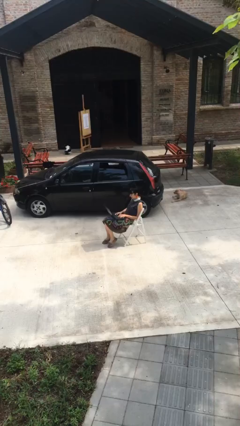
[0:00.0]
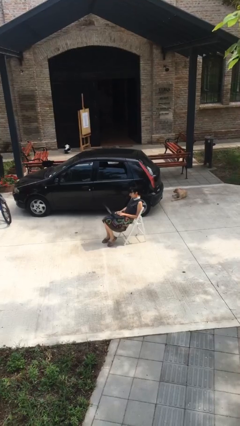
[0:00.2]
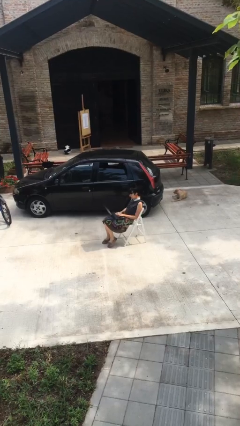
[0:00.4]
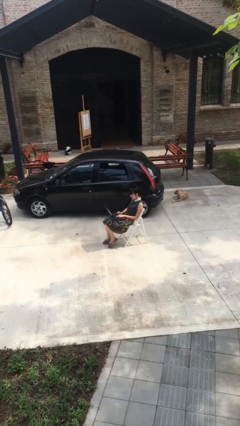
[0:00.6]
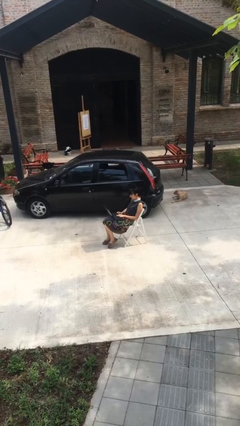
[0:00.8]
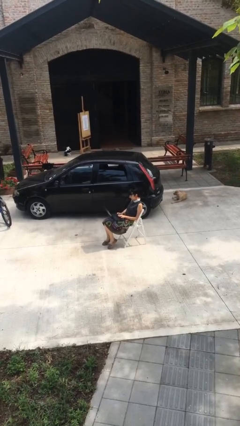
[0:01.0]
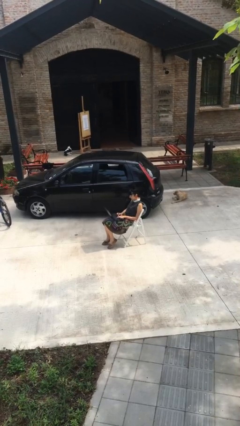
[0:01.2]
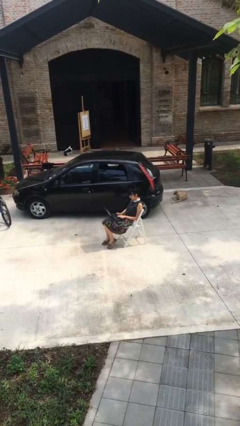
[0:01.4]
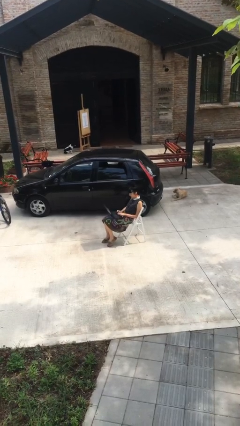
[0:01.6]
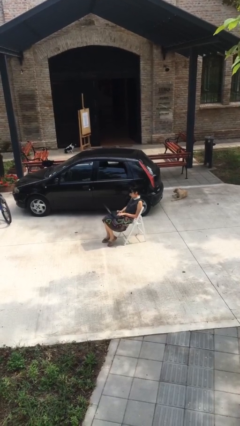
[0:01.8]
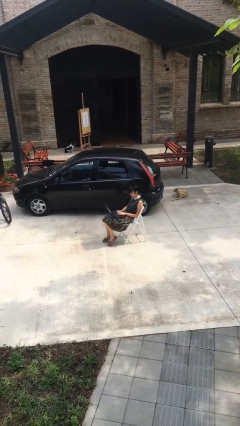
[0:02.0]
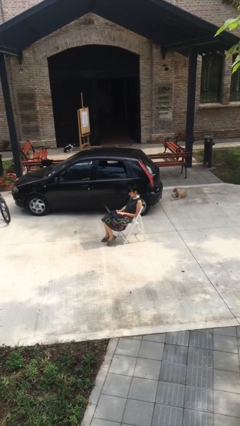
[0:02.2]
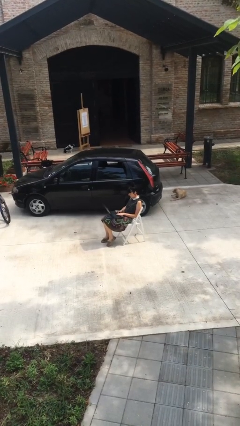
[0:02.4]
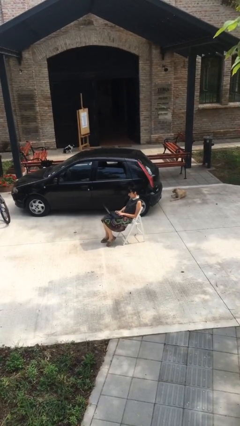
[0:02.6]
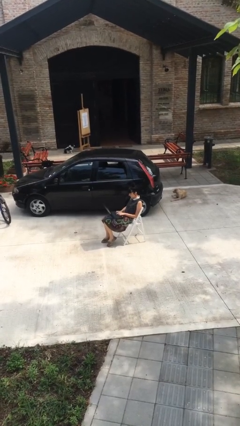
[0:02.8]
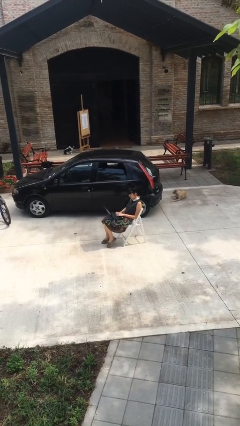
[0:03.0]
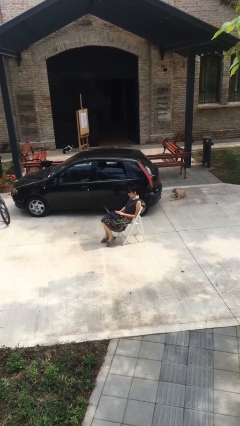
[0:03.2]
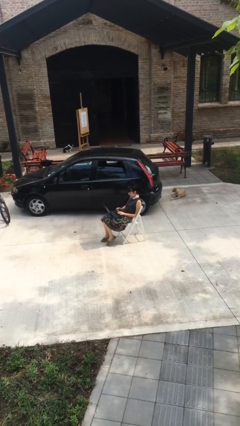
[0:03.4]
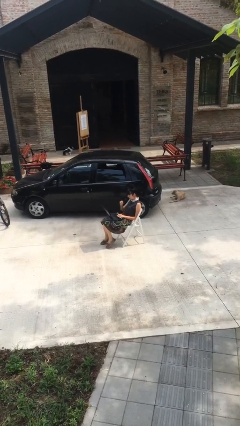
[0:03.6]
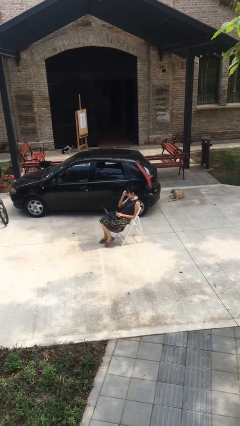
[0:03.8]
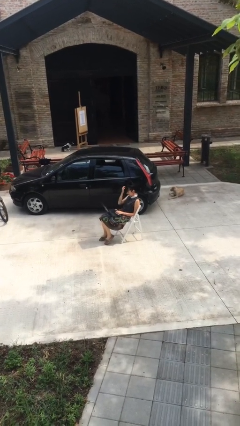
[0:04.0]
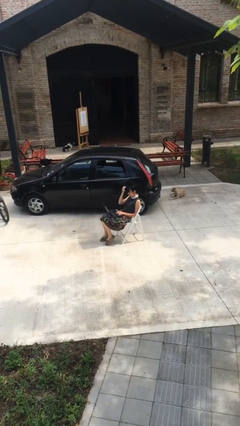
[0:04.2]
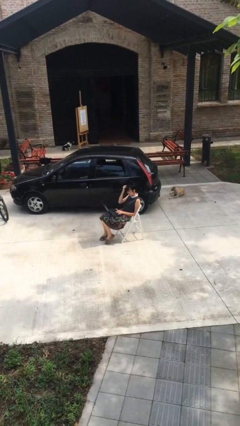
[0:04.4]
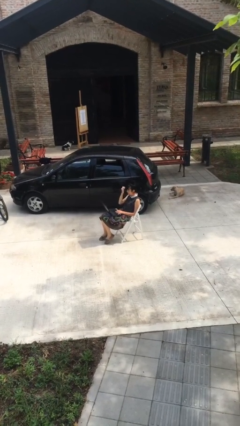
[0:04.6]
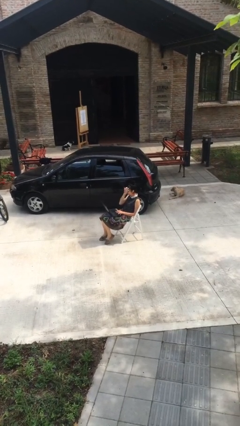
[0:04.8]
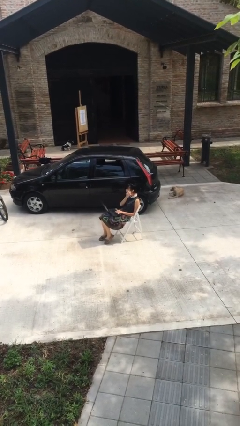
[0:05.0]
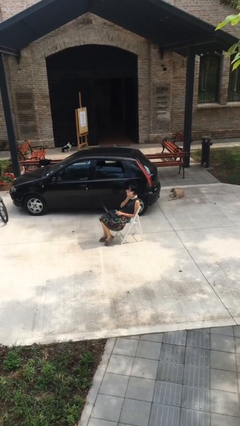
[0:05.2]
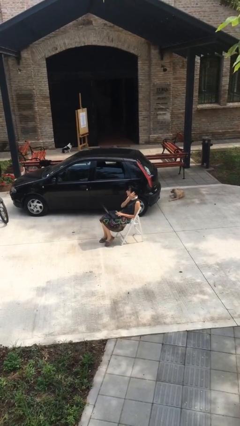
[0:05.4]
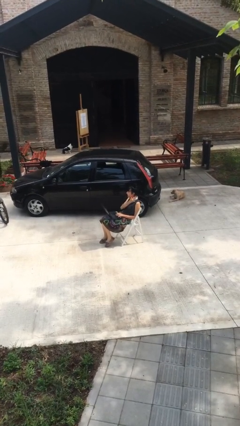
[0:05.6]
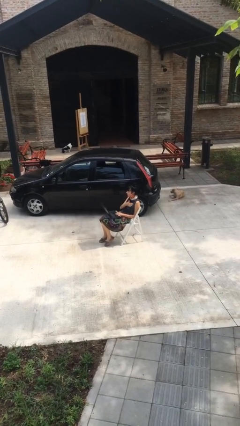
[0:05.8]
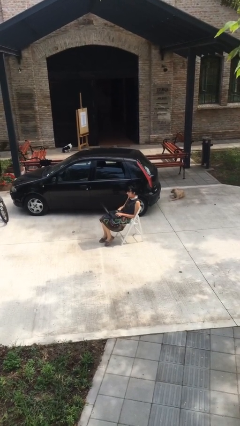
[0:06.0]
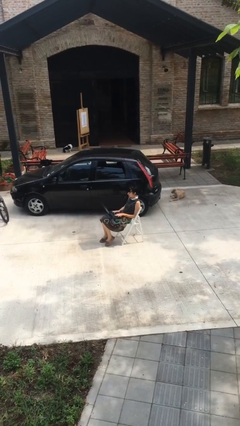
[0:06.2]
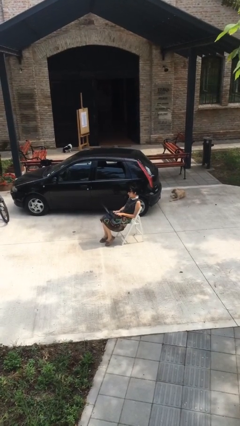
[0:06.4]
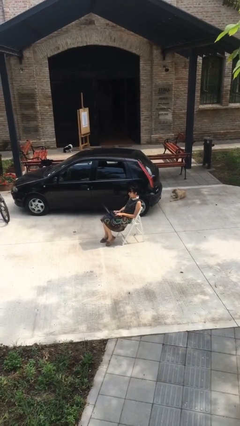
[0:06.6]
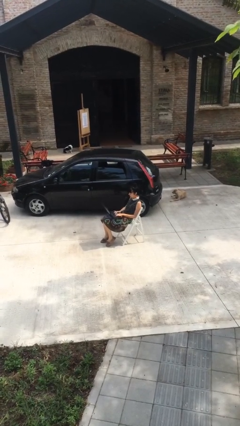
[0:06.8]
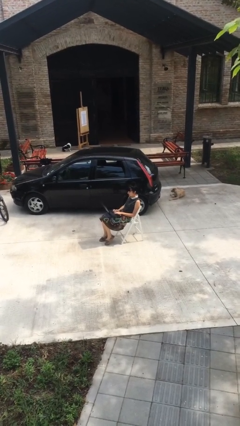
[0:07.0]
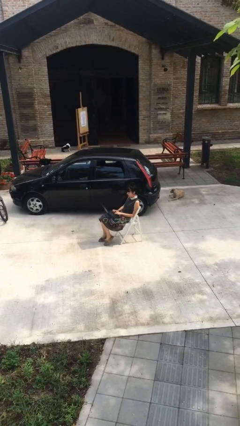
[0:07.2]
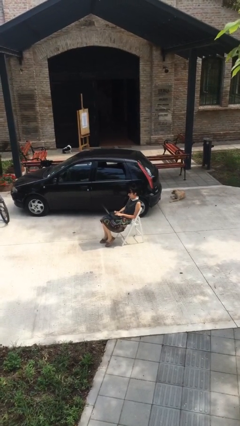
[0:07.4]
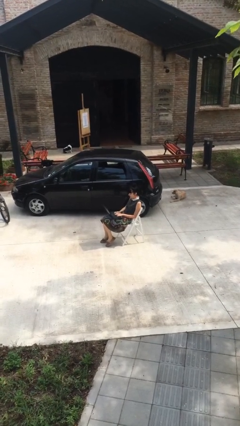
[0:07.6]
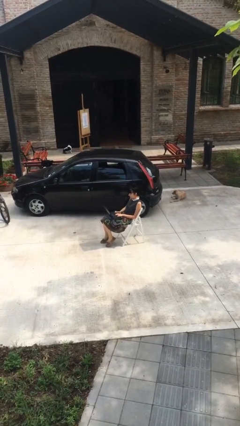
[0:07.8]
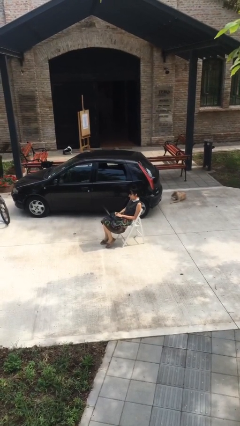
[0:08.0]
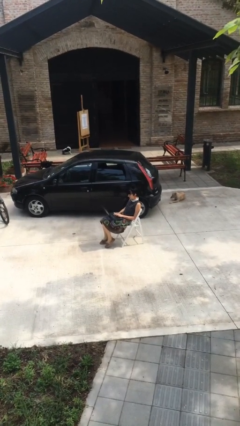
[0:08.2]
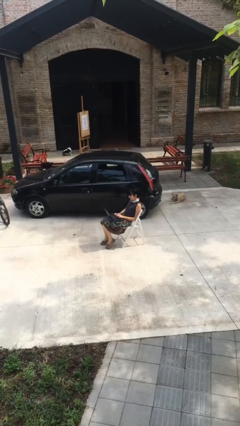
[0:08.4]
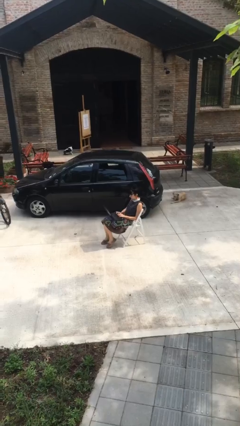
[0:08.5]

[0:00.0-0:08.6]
person interacts with laptop

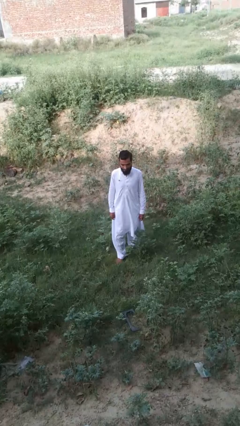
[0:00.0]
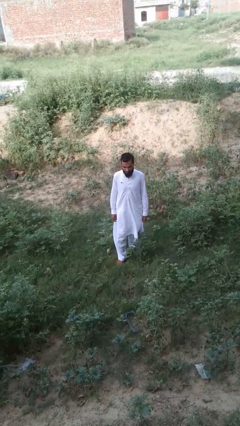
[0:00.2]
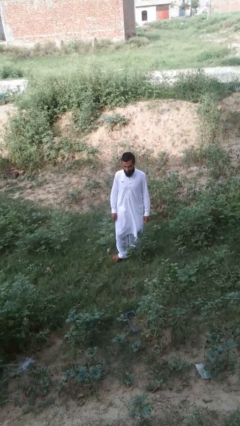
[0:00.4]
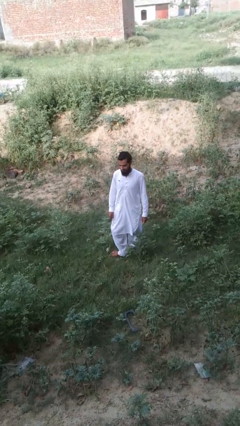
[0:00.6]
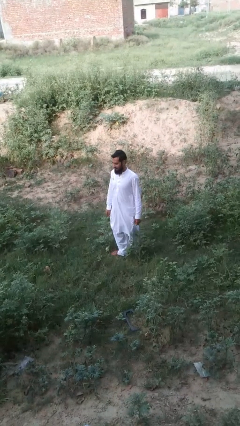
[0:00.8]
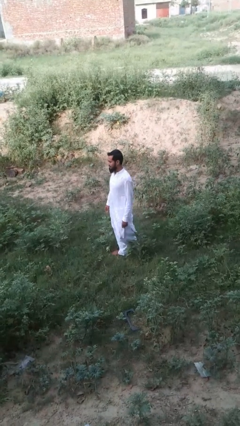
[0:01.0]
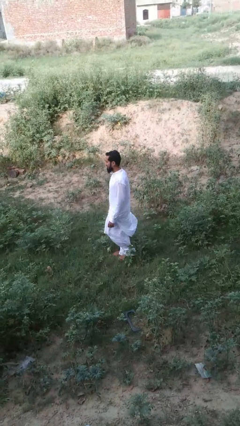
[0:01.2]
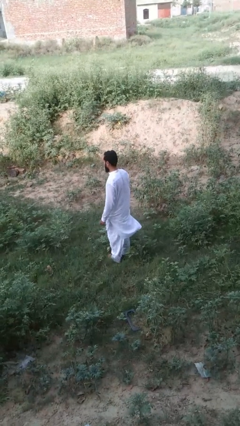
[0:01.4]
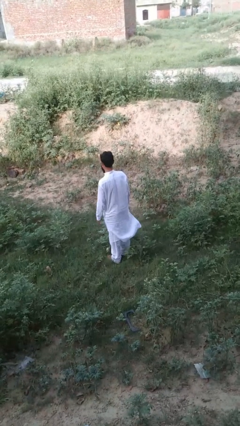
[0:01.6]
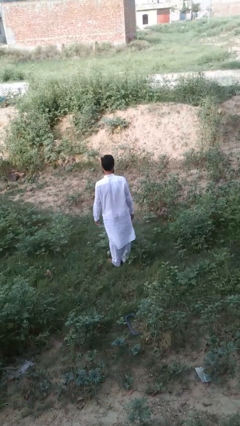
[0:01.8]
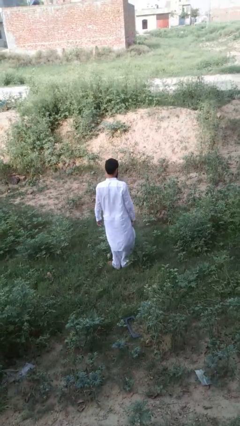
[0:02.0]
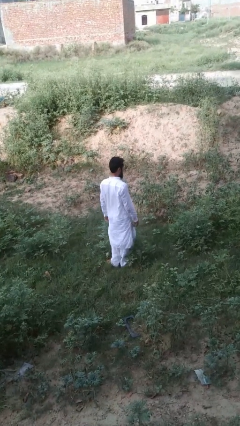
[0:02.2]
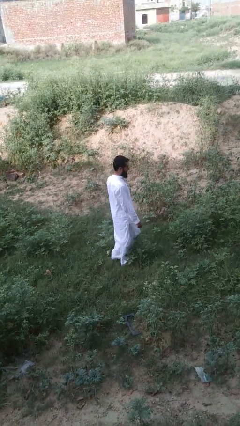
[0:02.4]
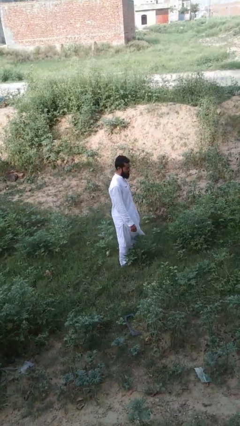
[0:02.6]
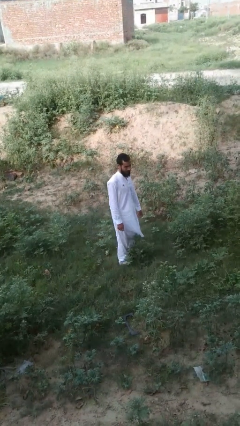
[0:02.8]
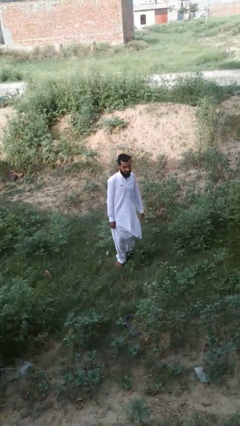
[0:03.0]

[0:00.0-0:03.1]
person twirls

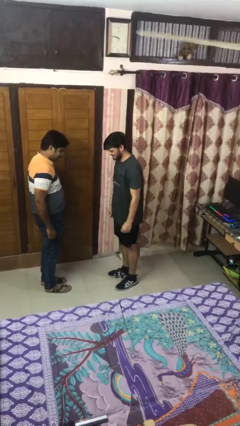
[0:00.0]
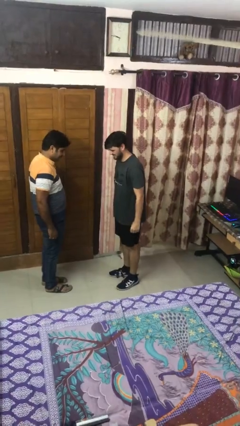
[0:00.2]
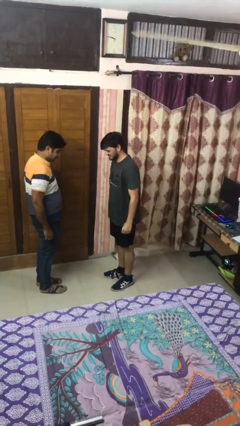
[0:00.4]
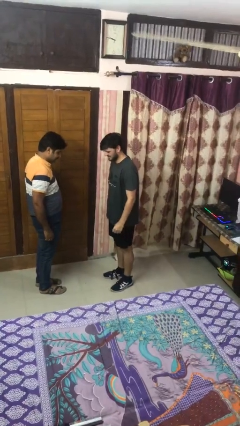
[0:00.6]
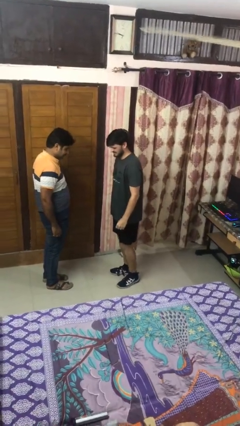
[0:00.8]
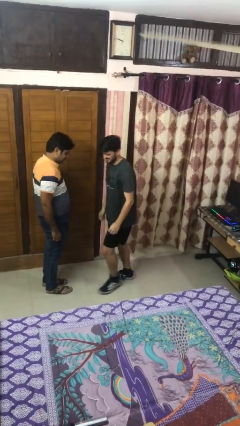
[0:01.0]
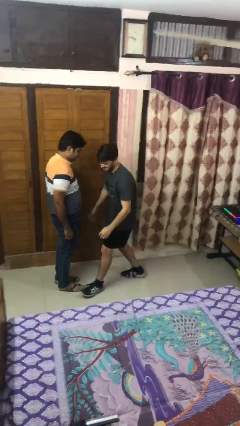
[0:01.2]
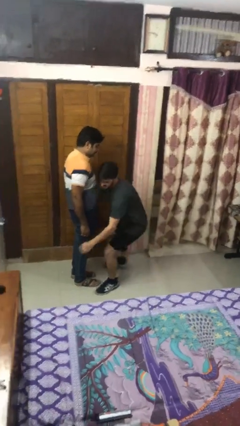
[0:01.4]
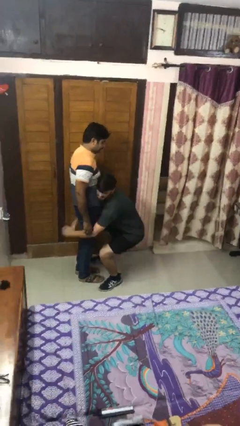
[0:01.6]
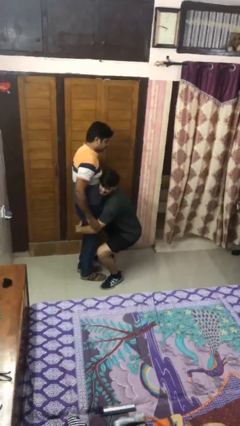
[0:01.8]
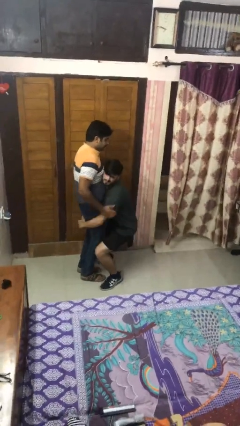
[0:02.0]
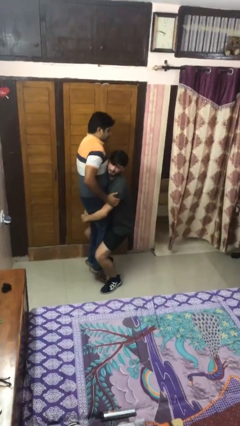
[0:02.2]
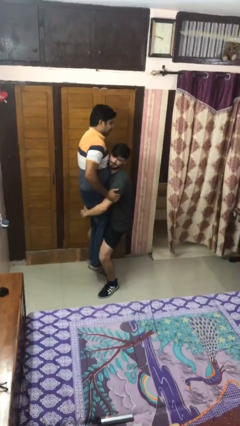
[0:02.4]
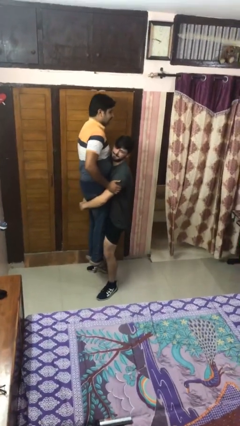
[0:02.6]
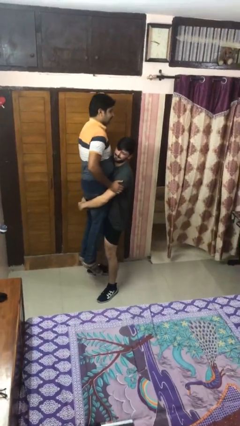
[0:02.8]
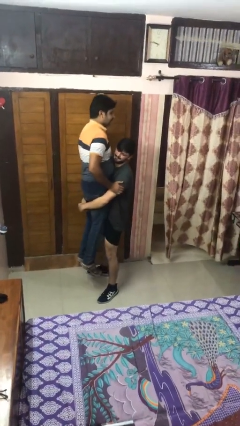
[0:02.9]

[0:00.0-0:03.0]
person picks up person

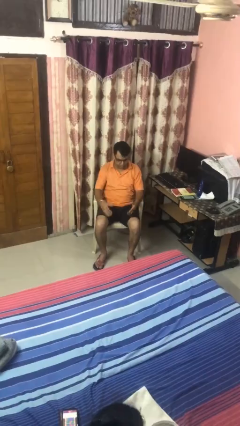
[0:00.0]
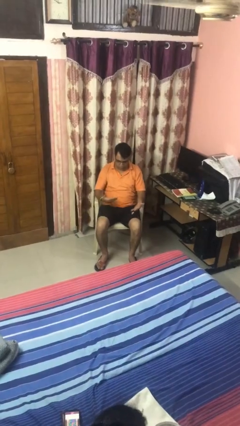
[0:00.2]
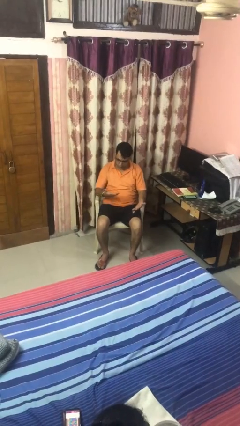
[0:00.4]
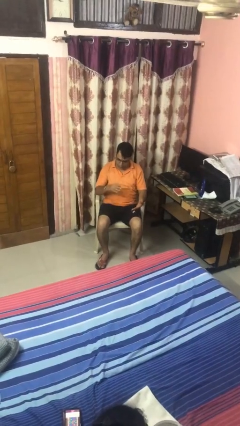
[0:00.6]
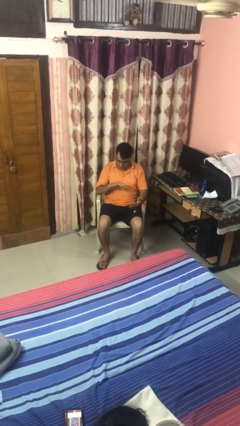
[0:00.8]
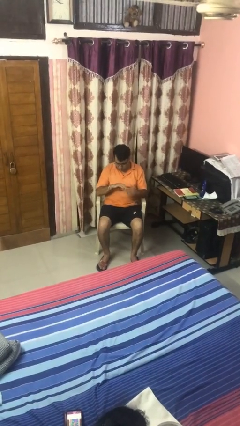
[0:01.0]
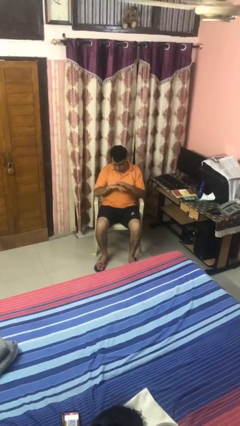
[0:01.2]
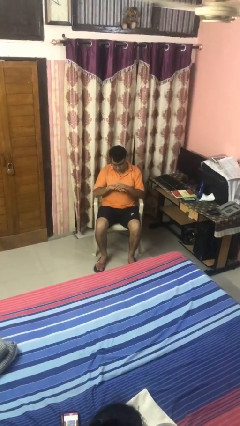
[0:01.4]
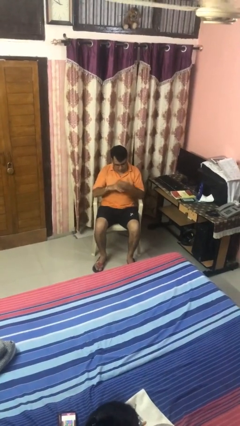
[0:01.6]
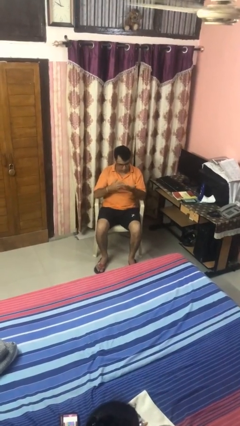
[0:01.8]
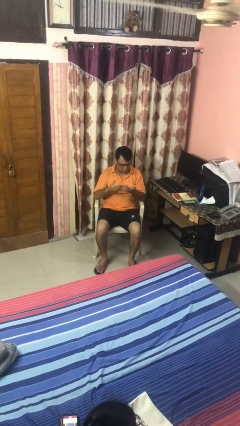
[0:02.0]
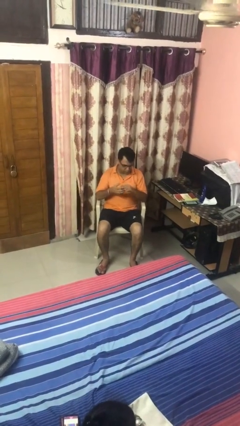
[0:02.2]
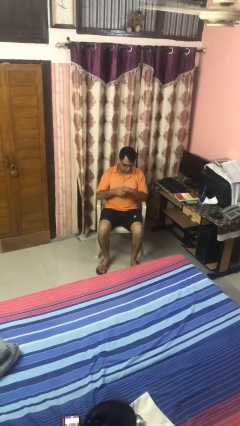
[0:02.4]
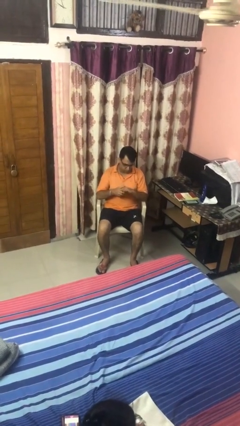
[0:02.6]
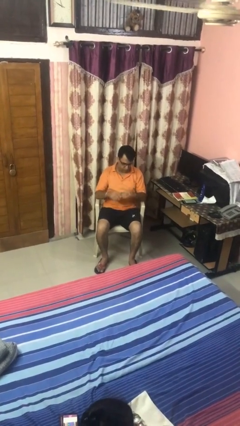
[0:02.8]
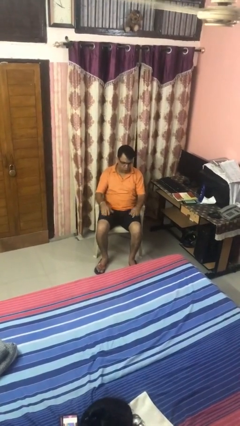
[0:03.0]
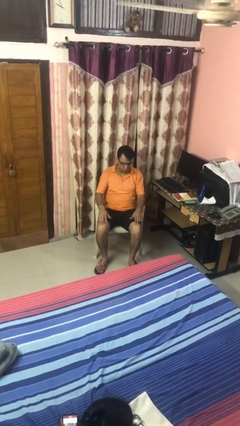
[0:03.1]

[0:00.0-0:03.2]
person looks at hands in lap
